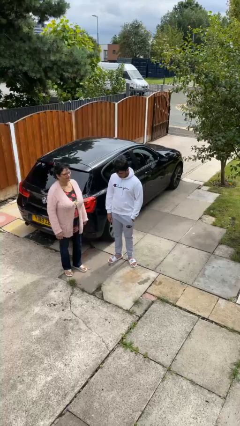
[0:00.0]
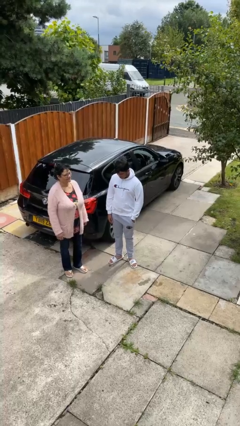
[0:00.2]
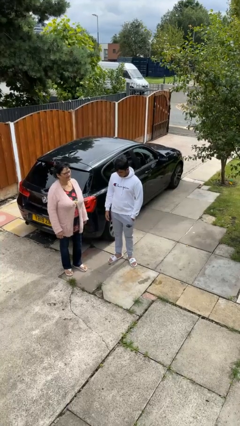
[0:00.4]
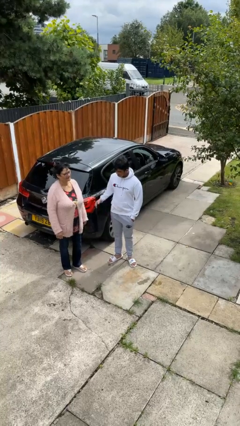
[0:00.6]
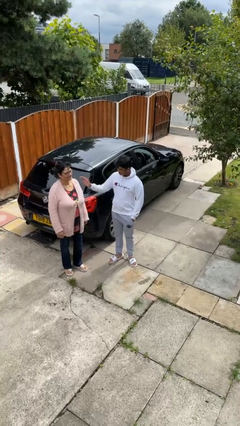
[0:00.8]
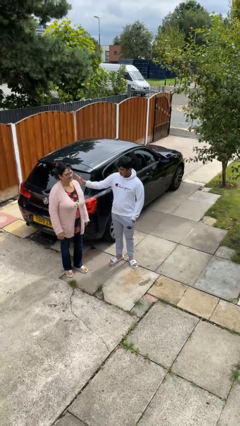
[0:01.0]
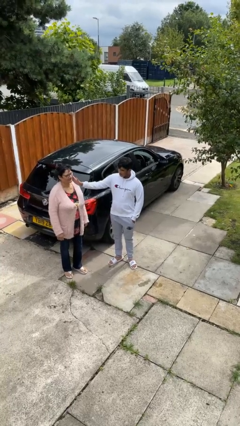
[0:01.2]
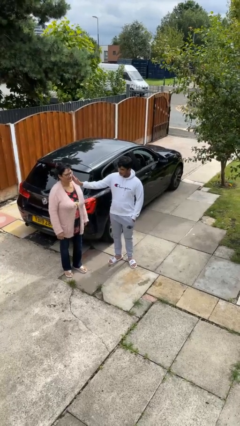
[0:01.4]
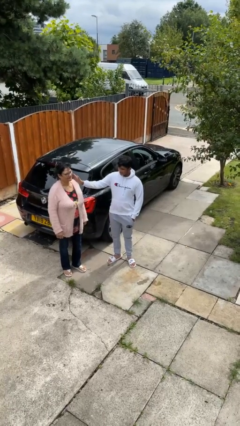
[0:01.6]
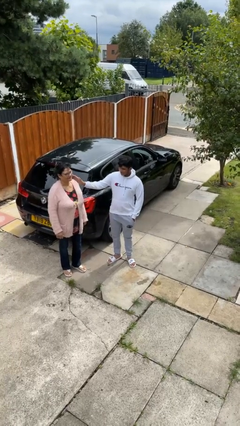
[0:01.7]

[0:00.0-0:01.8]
person touches face of person

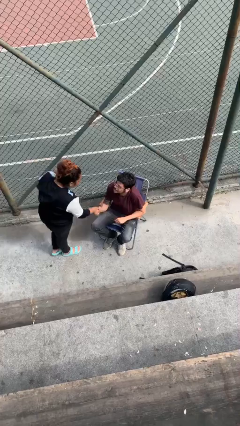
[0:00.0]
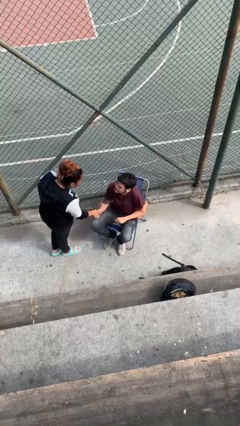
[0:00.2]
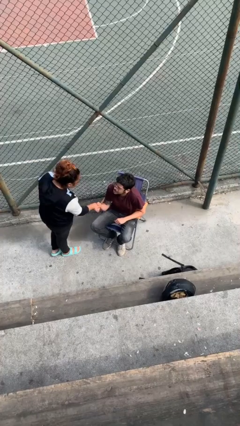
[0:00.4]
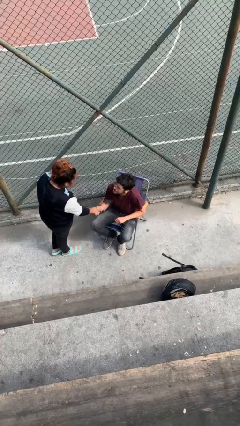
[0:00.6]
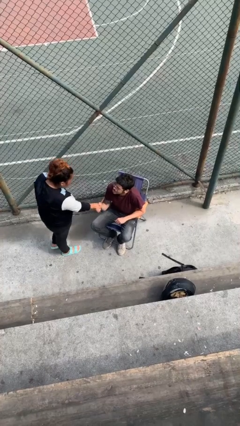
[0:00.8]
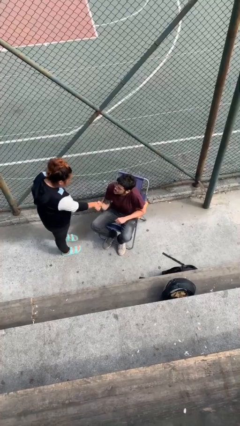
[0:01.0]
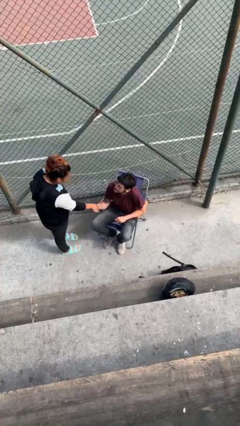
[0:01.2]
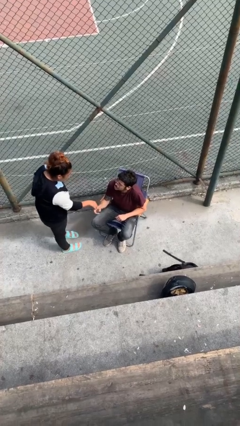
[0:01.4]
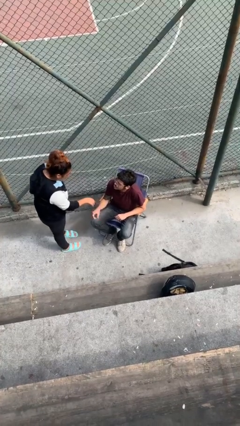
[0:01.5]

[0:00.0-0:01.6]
person shakes hand

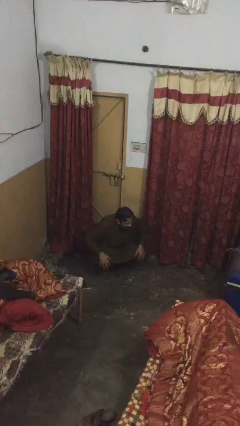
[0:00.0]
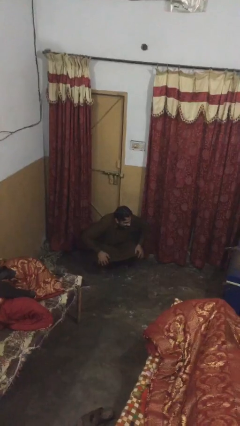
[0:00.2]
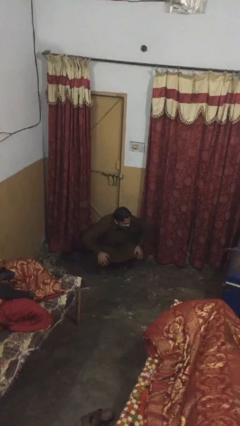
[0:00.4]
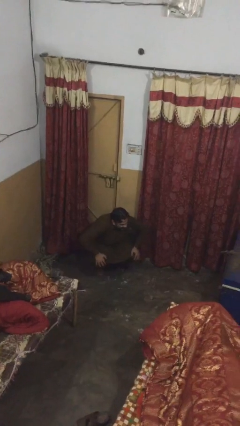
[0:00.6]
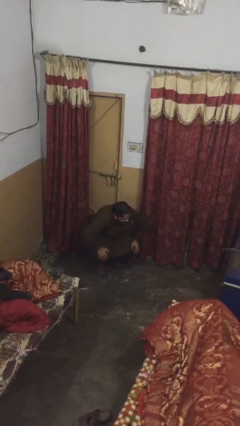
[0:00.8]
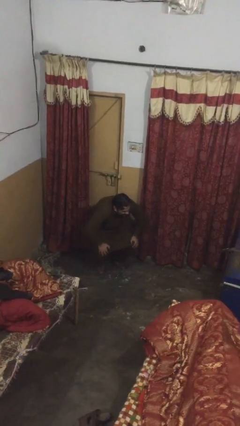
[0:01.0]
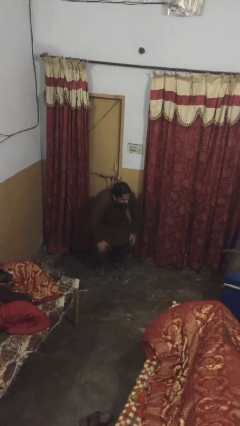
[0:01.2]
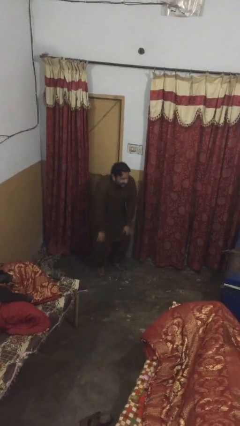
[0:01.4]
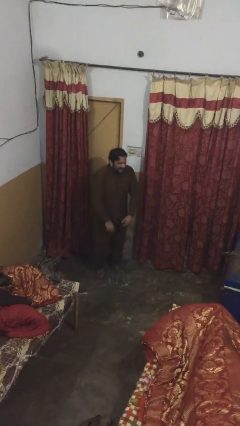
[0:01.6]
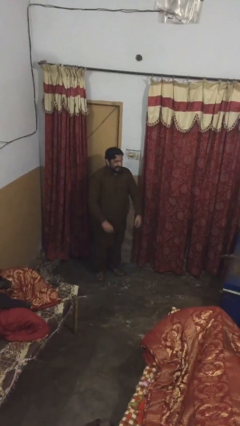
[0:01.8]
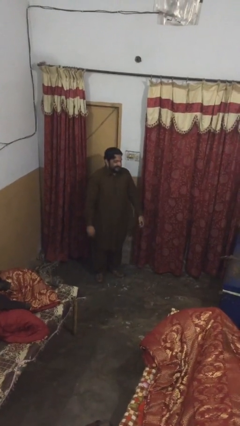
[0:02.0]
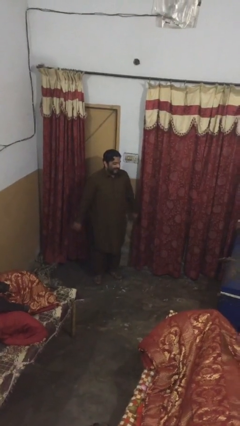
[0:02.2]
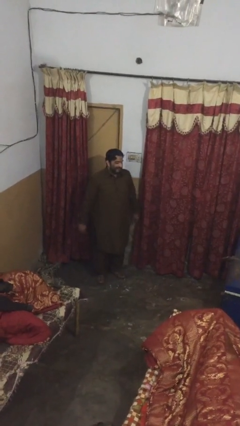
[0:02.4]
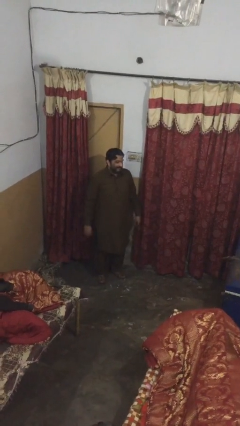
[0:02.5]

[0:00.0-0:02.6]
person stands up

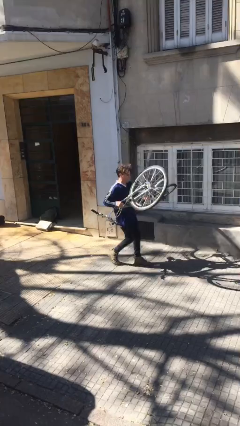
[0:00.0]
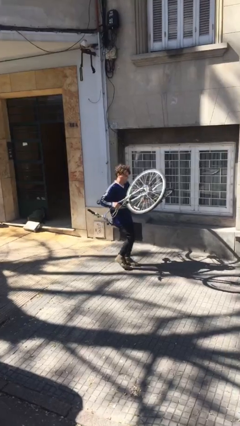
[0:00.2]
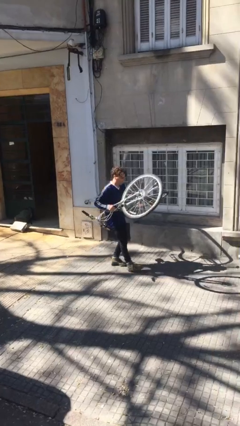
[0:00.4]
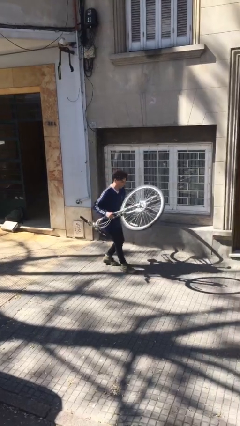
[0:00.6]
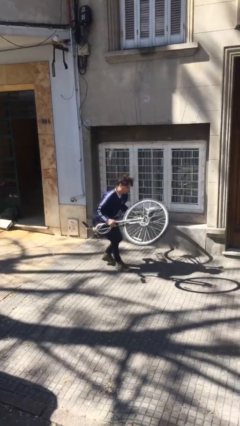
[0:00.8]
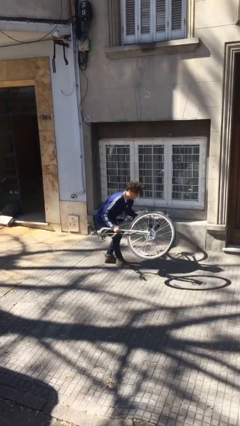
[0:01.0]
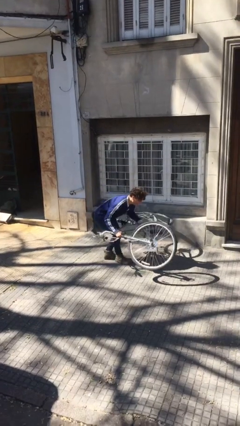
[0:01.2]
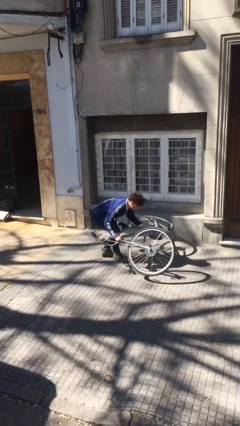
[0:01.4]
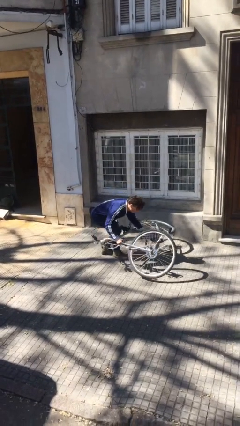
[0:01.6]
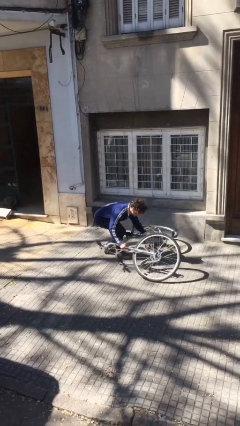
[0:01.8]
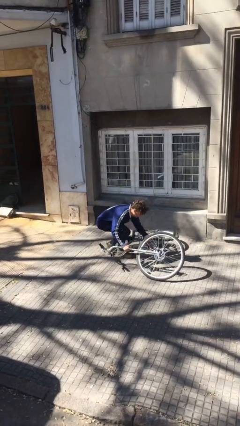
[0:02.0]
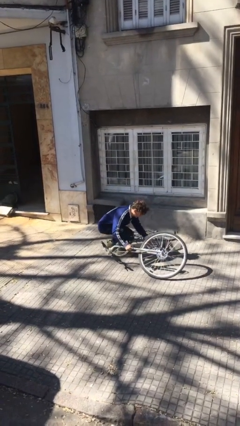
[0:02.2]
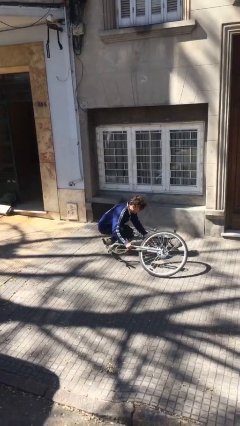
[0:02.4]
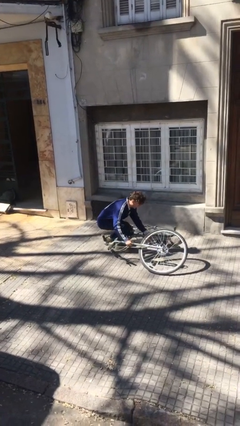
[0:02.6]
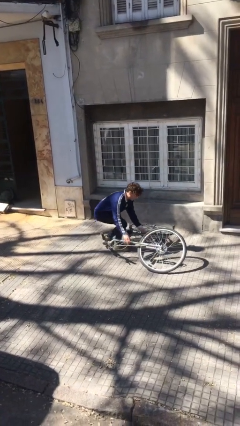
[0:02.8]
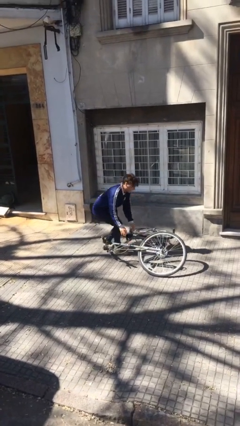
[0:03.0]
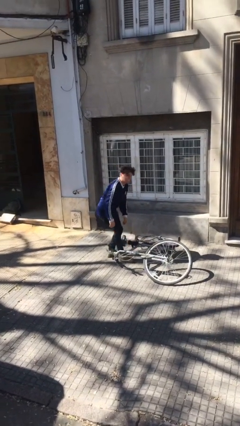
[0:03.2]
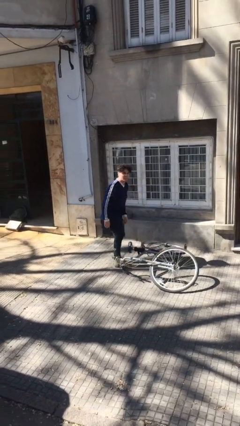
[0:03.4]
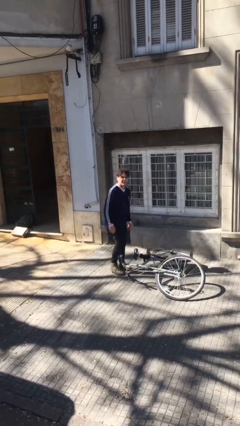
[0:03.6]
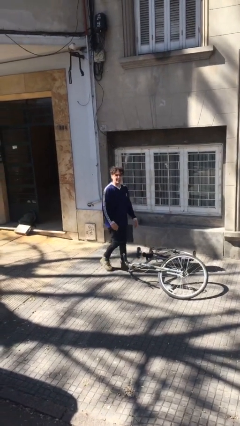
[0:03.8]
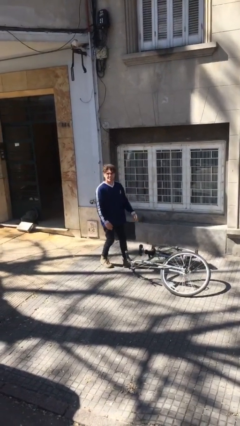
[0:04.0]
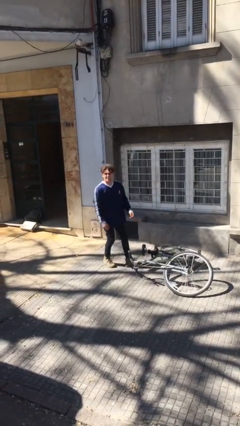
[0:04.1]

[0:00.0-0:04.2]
person puts down object on floor

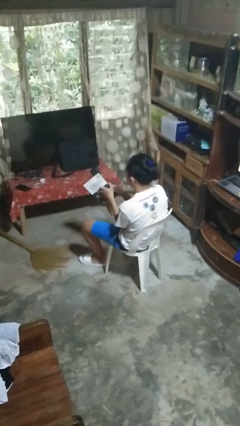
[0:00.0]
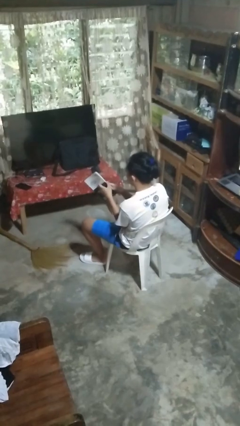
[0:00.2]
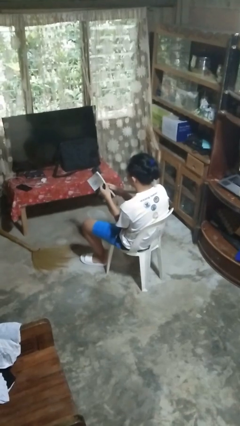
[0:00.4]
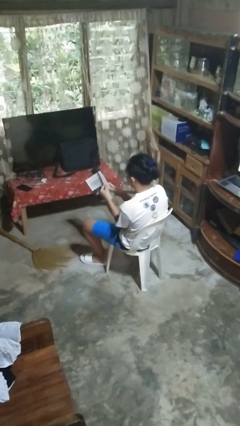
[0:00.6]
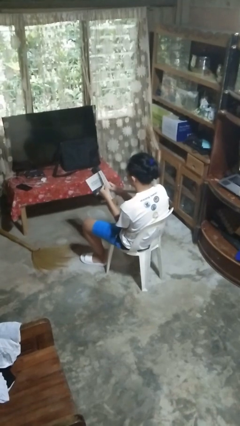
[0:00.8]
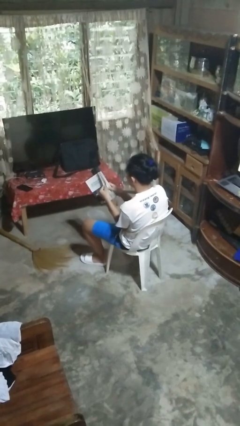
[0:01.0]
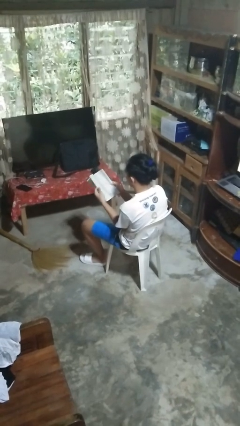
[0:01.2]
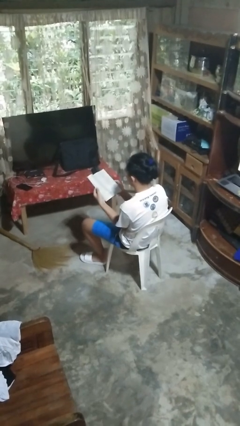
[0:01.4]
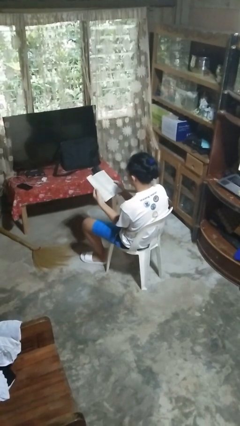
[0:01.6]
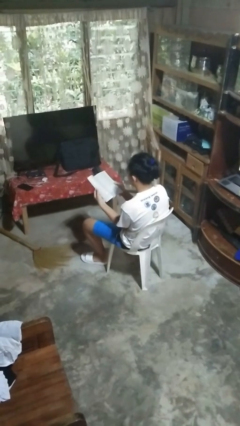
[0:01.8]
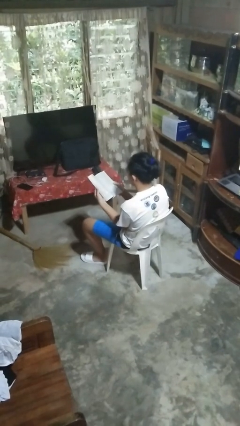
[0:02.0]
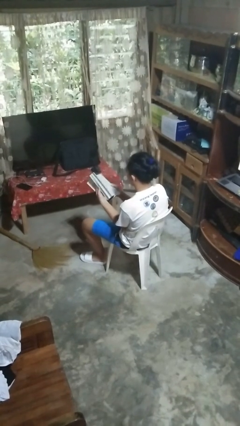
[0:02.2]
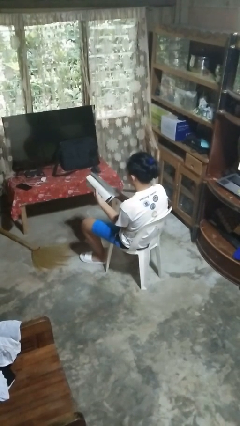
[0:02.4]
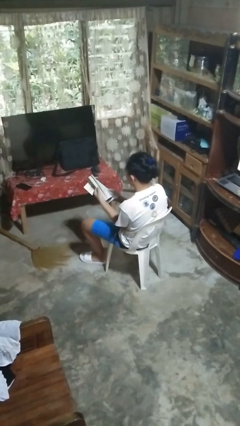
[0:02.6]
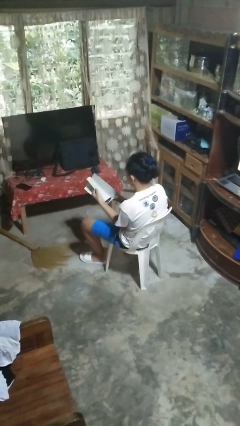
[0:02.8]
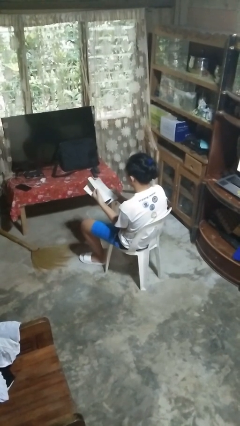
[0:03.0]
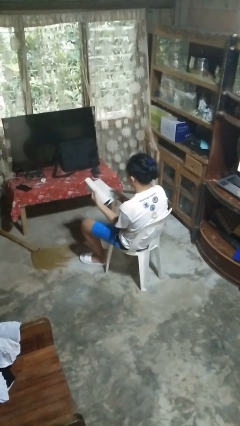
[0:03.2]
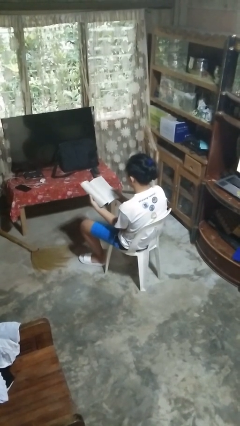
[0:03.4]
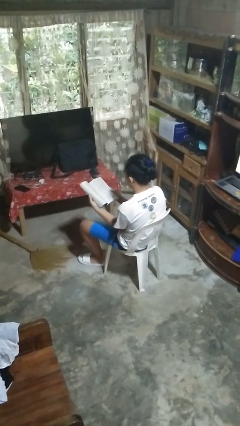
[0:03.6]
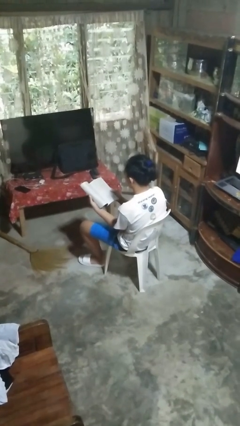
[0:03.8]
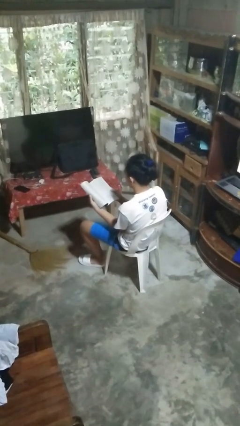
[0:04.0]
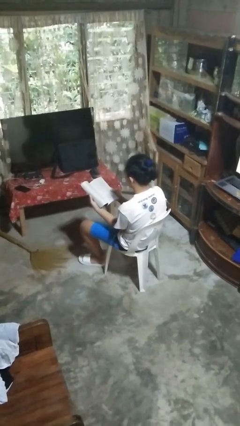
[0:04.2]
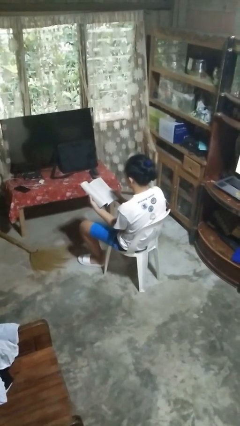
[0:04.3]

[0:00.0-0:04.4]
person reads book

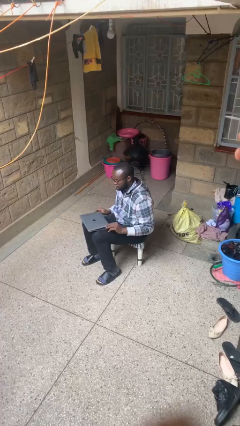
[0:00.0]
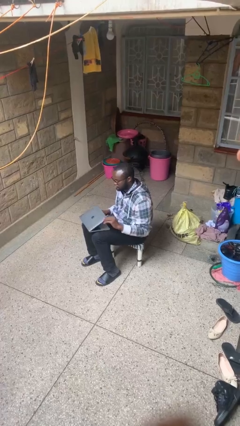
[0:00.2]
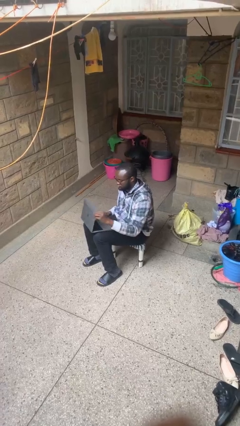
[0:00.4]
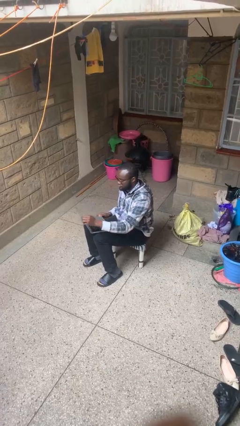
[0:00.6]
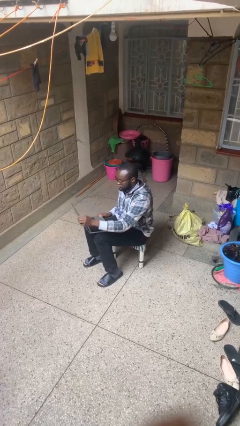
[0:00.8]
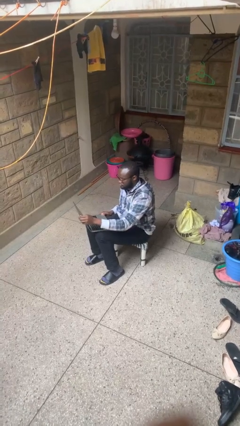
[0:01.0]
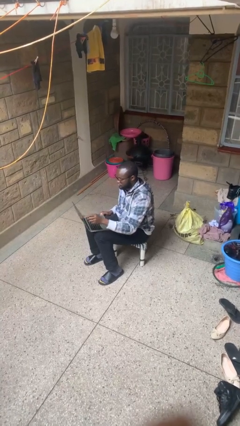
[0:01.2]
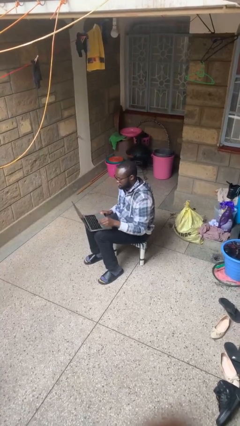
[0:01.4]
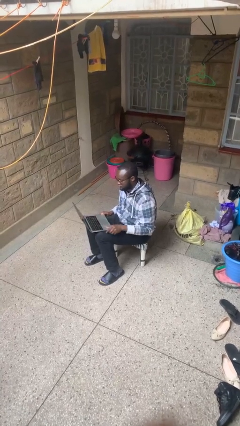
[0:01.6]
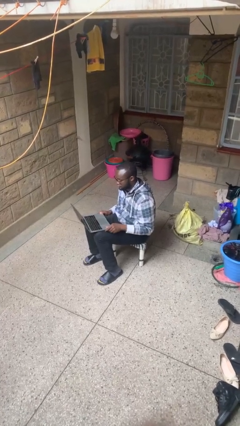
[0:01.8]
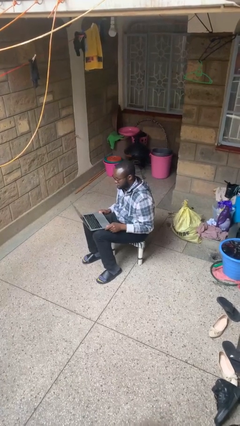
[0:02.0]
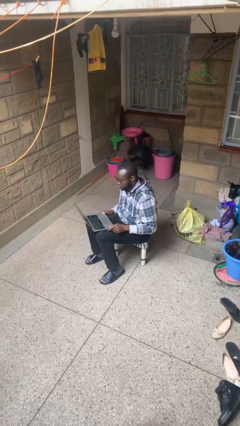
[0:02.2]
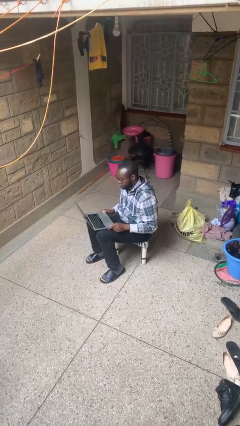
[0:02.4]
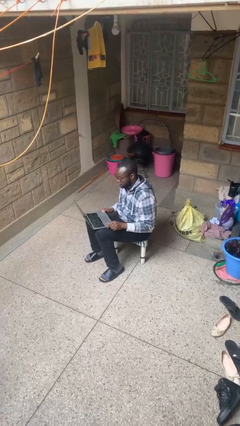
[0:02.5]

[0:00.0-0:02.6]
person opens laptop

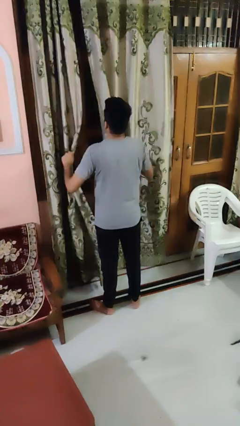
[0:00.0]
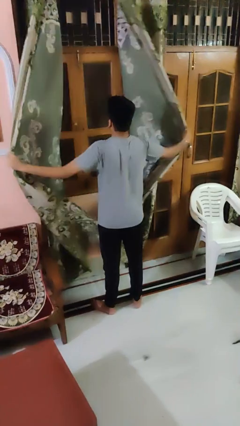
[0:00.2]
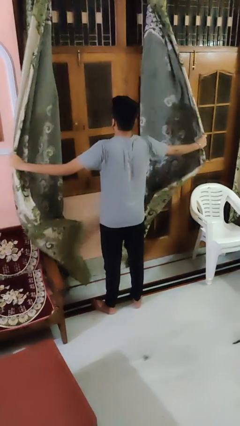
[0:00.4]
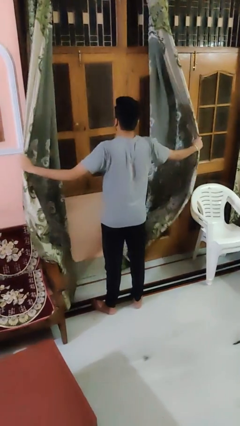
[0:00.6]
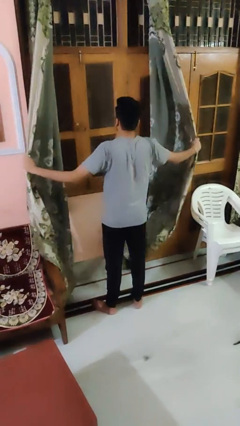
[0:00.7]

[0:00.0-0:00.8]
person opens curtains
